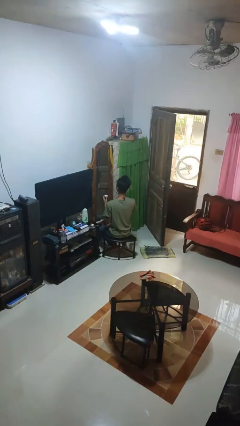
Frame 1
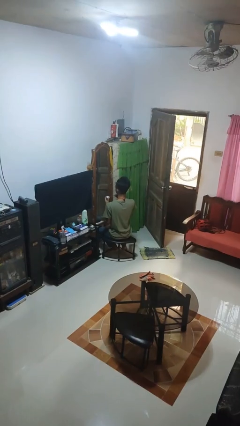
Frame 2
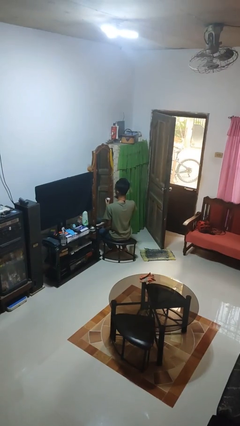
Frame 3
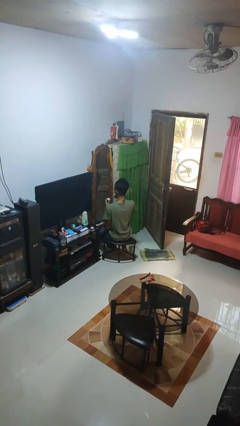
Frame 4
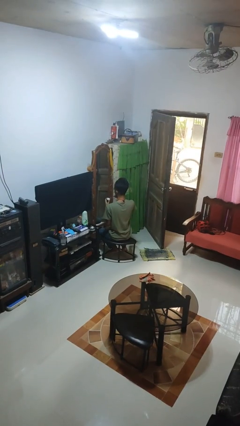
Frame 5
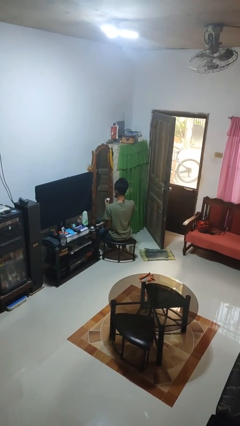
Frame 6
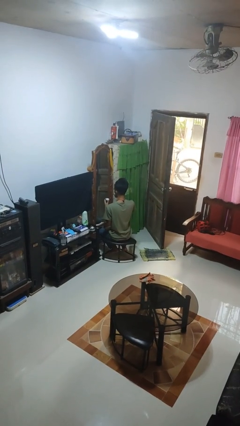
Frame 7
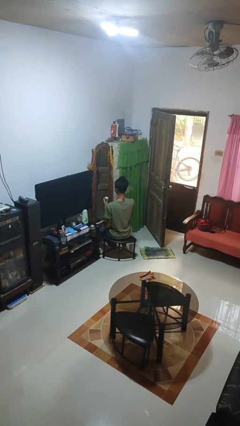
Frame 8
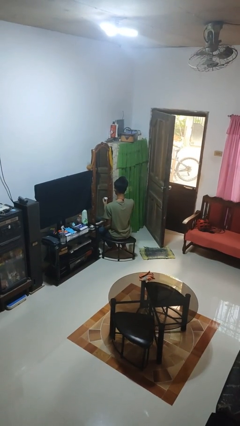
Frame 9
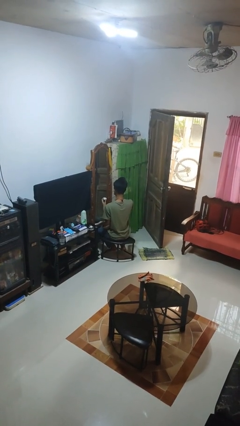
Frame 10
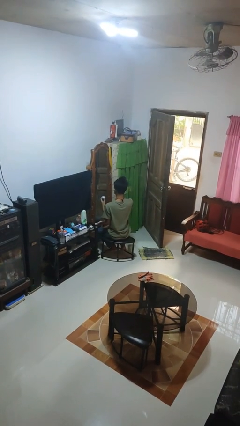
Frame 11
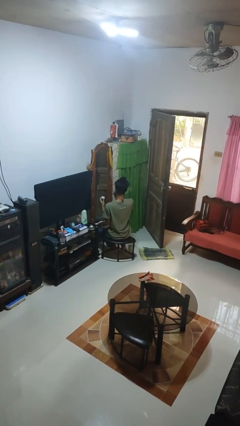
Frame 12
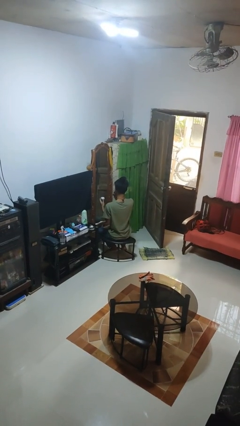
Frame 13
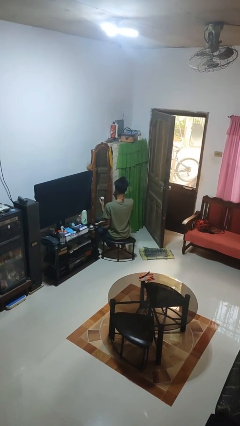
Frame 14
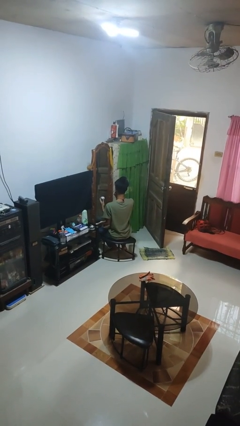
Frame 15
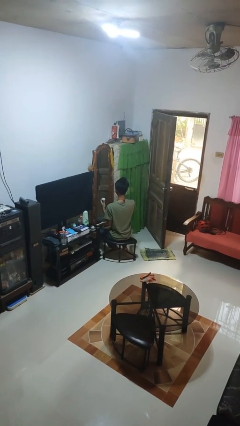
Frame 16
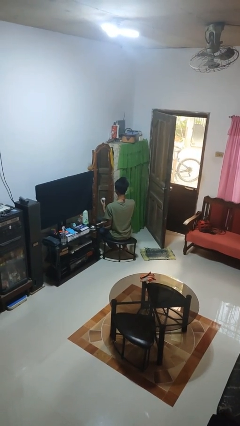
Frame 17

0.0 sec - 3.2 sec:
person applies eye makeup

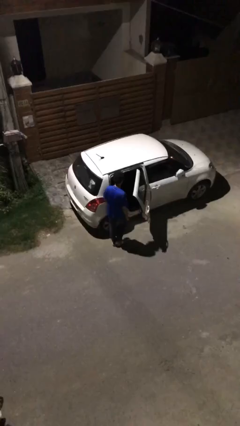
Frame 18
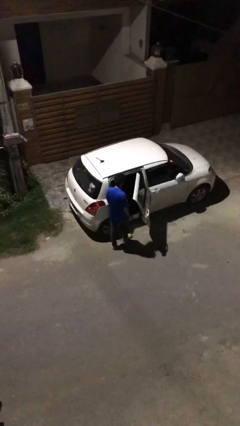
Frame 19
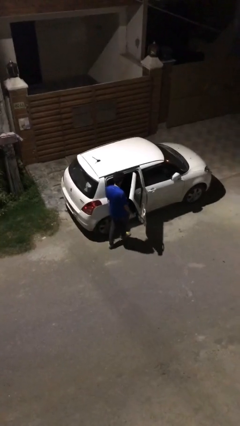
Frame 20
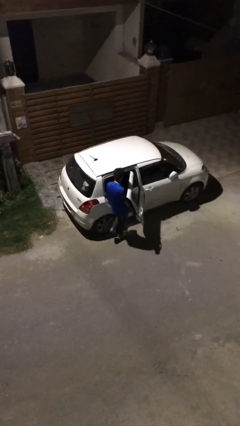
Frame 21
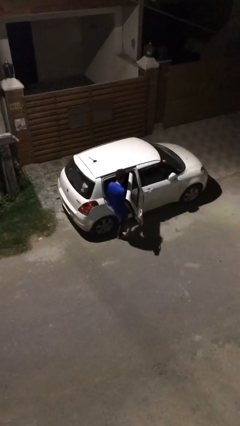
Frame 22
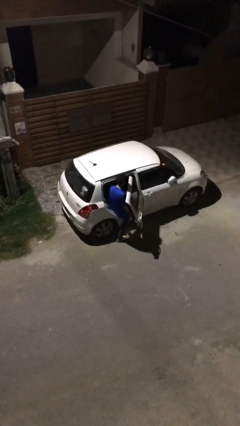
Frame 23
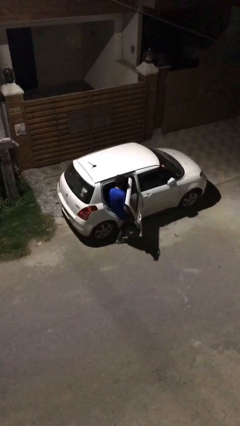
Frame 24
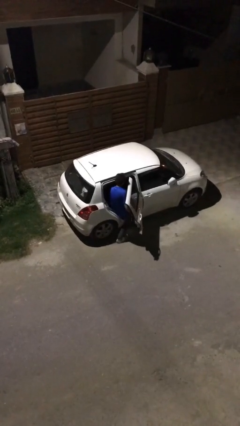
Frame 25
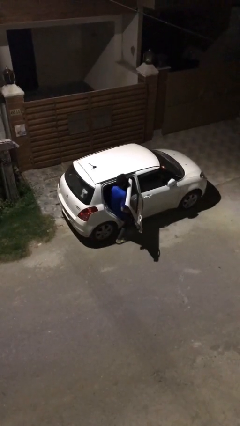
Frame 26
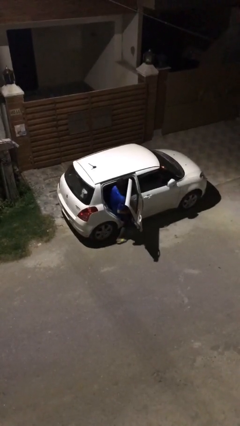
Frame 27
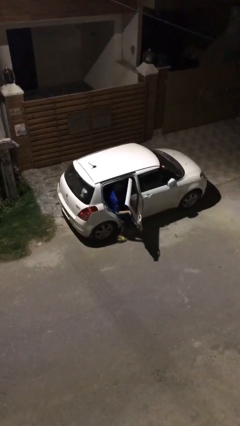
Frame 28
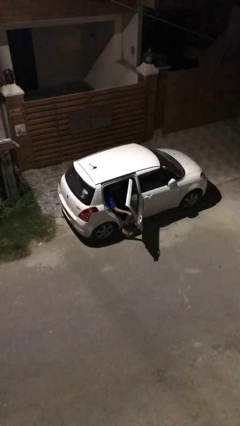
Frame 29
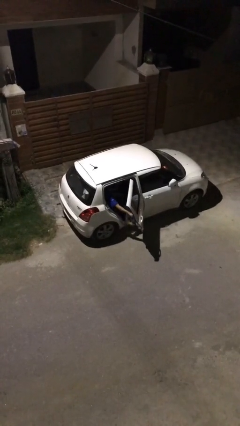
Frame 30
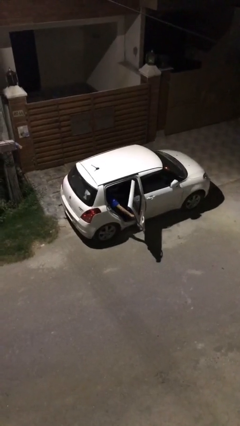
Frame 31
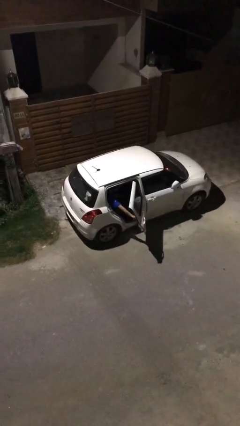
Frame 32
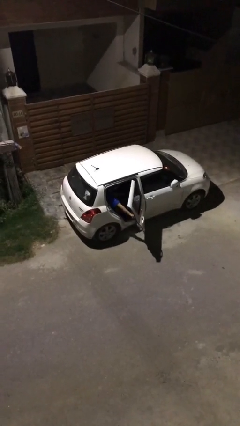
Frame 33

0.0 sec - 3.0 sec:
person enters car

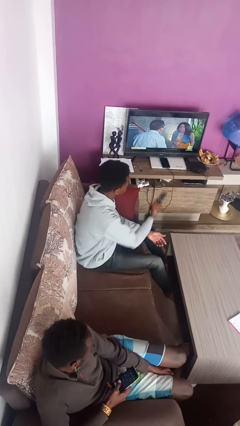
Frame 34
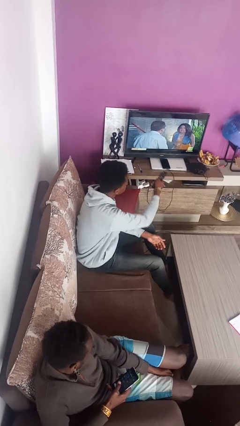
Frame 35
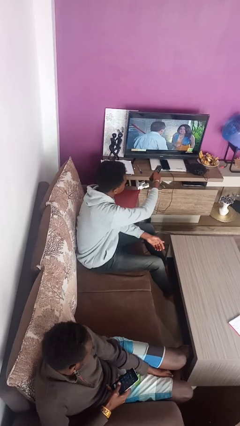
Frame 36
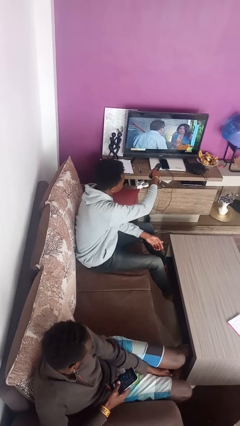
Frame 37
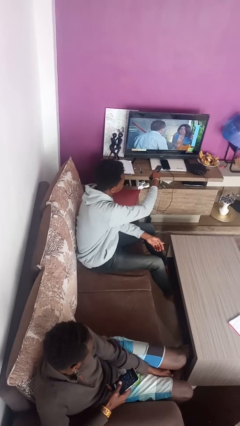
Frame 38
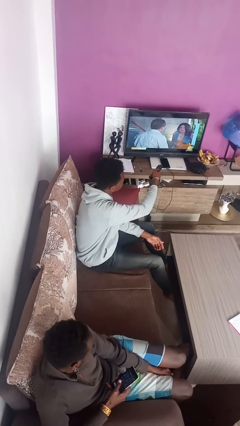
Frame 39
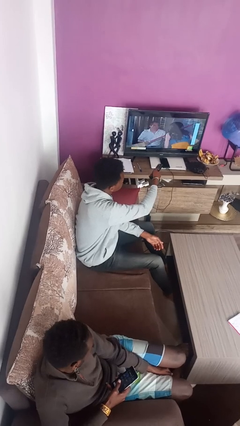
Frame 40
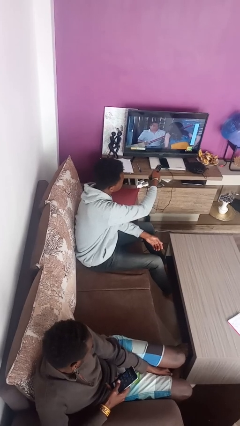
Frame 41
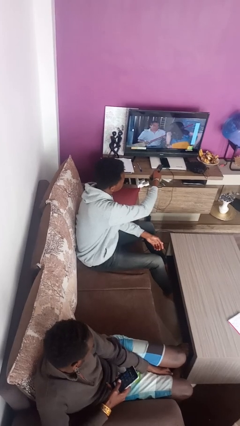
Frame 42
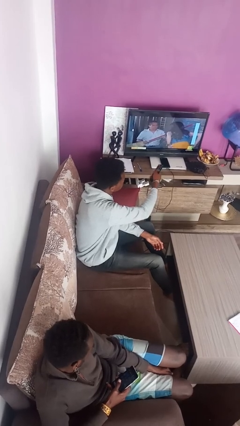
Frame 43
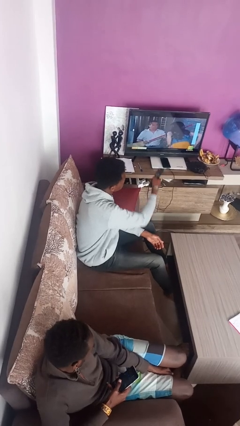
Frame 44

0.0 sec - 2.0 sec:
person uses television remote

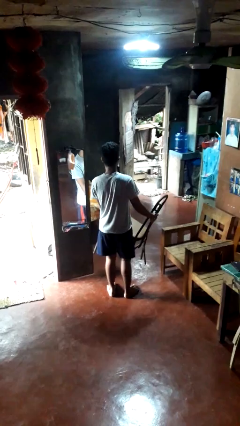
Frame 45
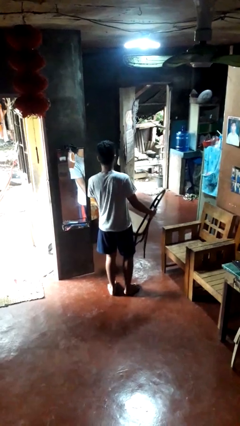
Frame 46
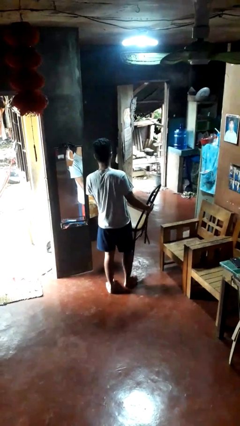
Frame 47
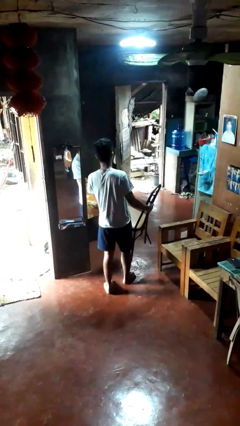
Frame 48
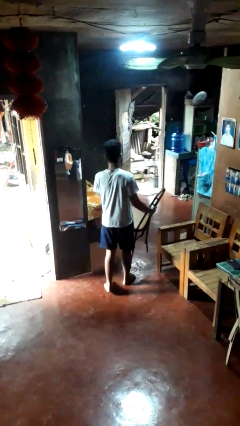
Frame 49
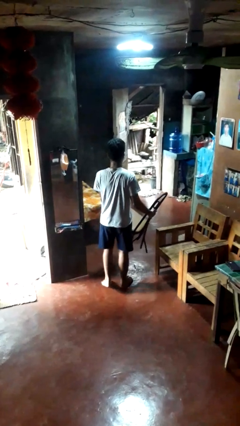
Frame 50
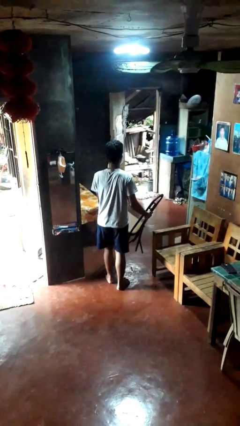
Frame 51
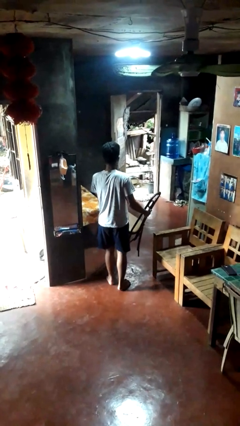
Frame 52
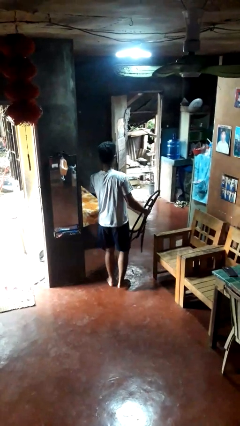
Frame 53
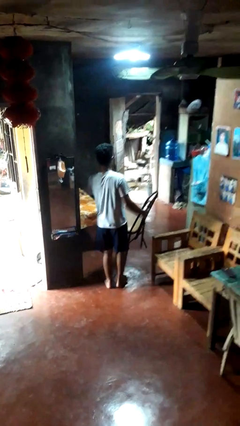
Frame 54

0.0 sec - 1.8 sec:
person carries furniture

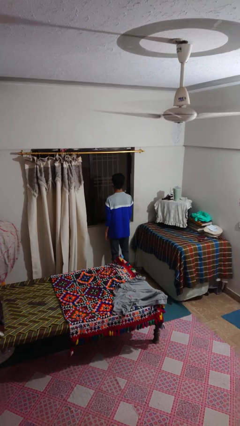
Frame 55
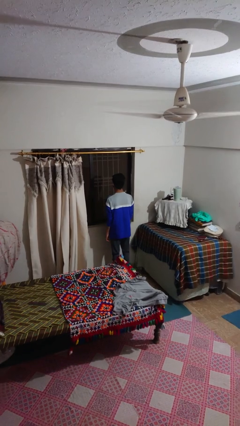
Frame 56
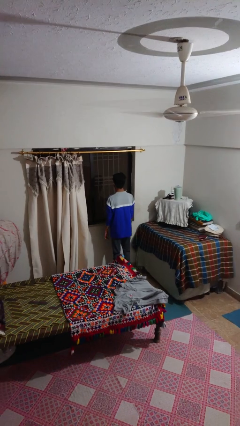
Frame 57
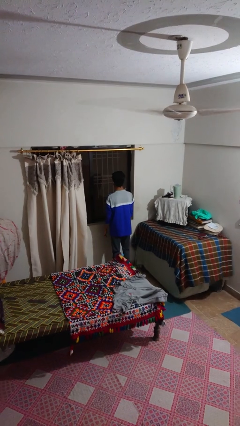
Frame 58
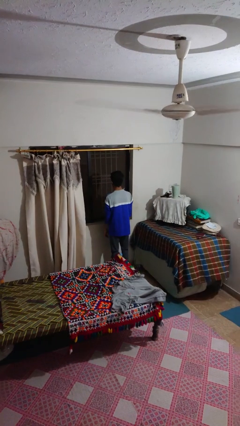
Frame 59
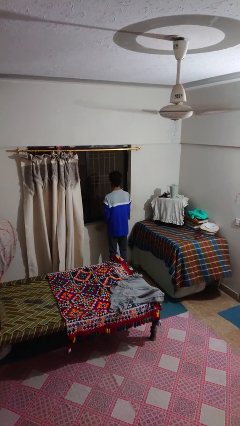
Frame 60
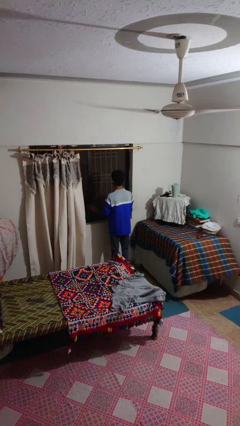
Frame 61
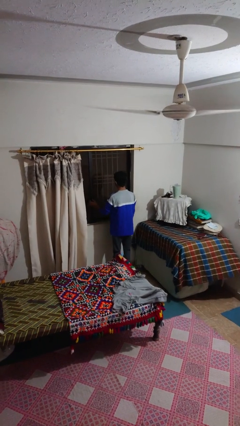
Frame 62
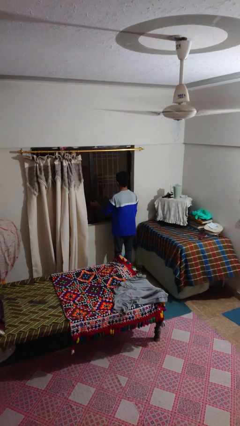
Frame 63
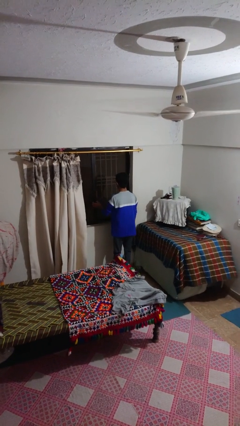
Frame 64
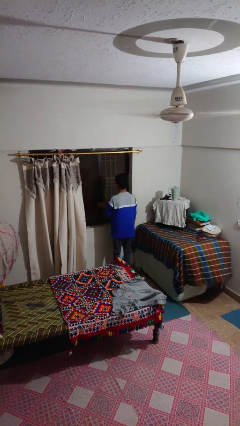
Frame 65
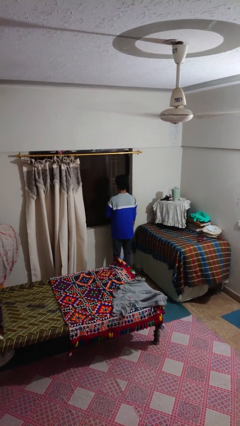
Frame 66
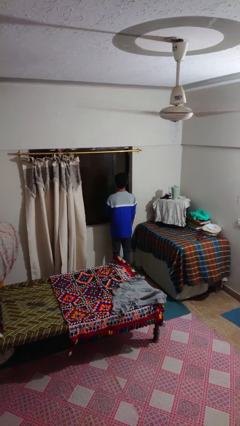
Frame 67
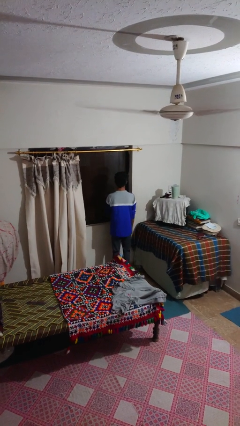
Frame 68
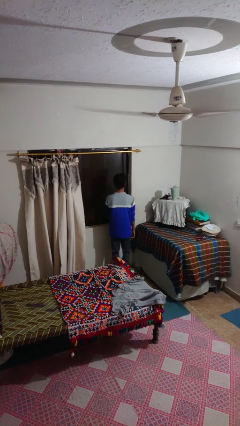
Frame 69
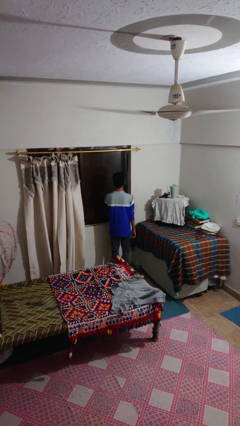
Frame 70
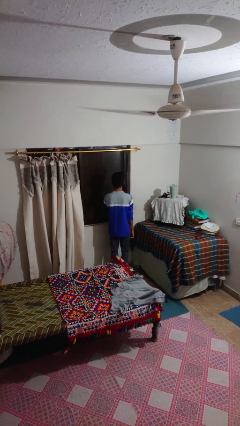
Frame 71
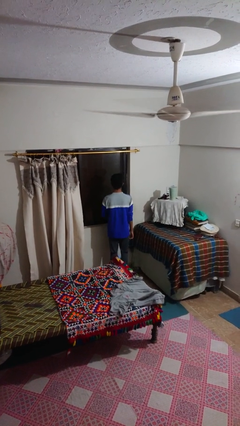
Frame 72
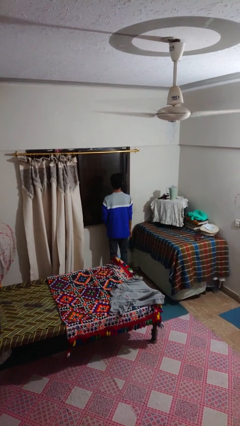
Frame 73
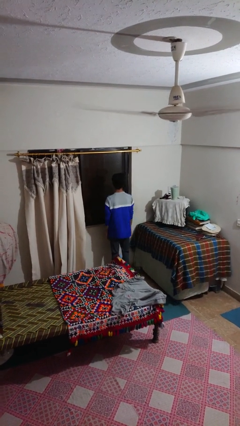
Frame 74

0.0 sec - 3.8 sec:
person closes home window

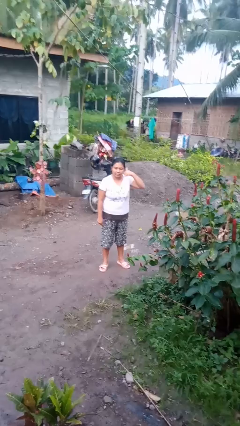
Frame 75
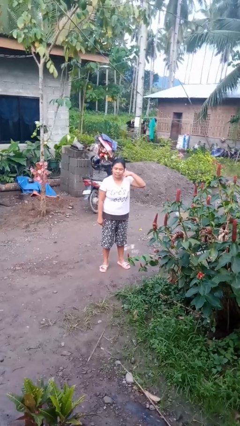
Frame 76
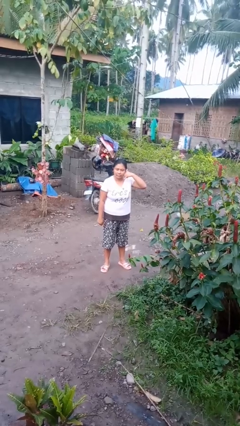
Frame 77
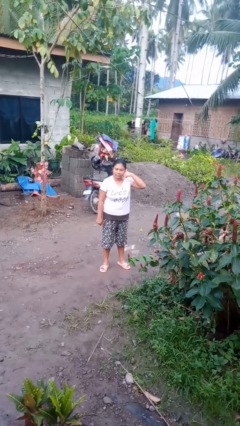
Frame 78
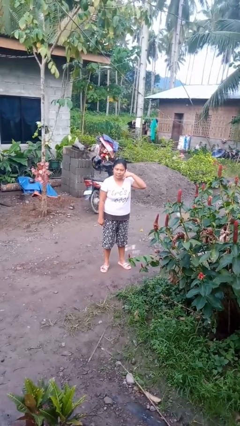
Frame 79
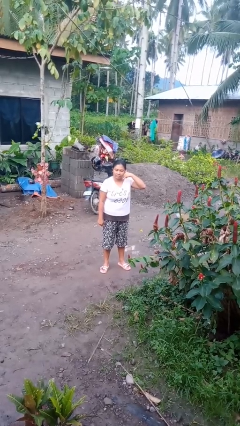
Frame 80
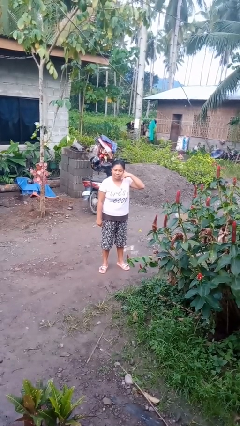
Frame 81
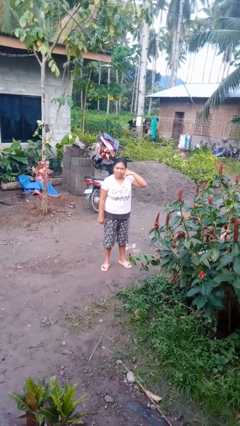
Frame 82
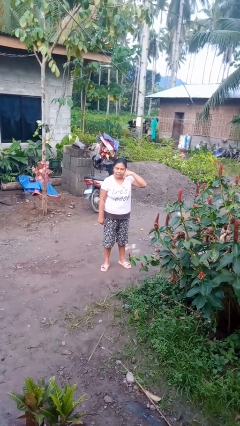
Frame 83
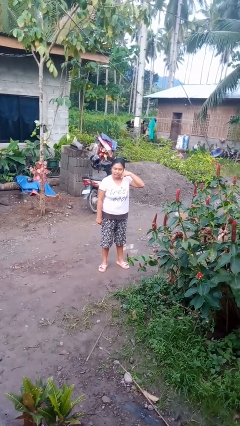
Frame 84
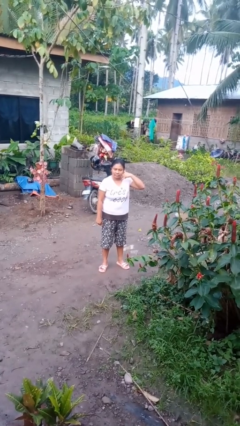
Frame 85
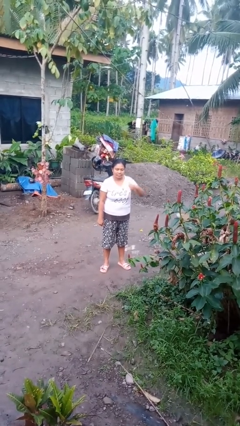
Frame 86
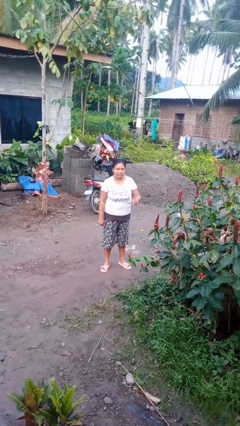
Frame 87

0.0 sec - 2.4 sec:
person gestures call me

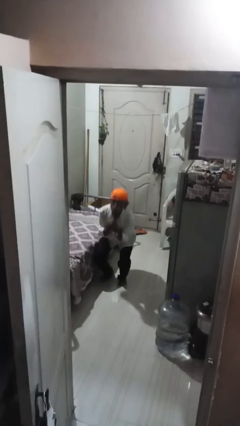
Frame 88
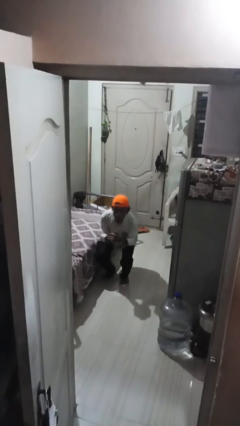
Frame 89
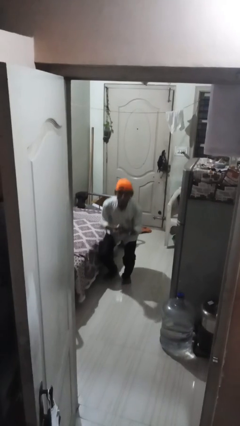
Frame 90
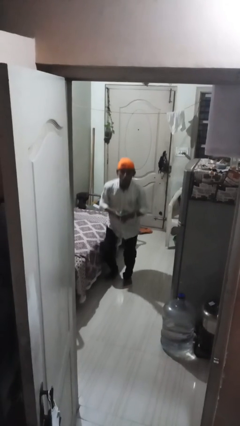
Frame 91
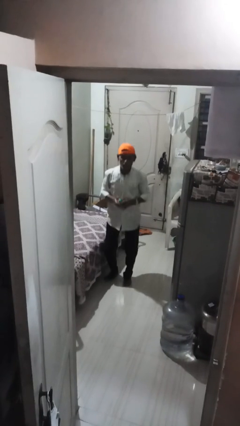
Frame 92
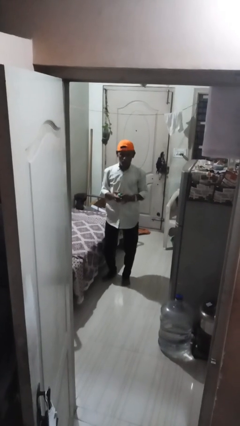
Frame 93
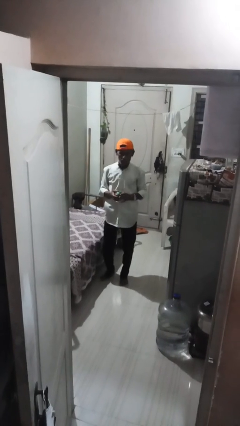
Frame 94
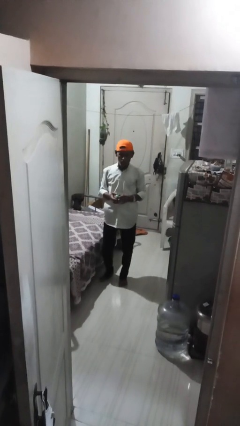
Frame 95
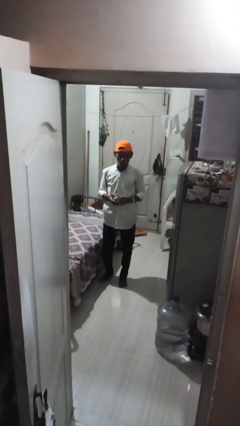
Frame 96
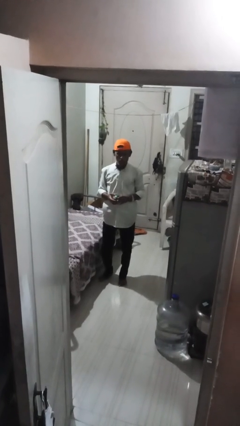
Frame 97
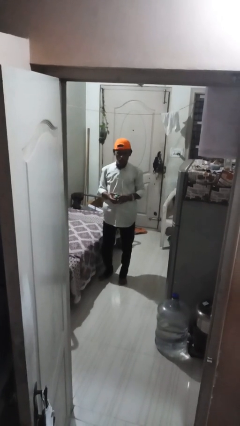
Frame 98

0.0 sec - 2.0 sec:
person catches dropped object
